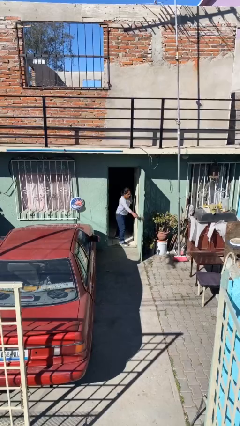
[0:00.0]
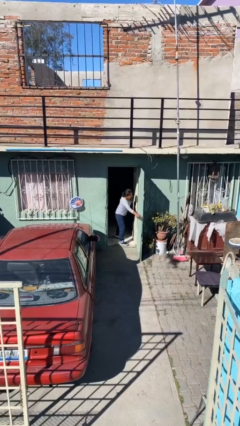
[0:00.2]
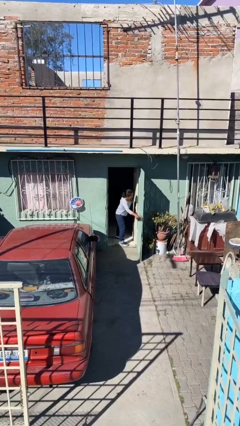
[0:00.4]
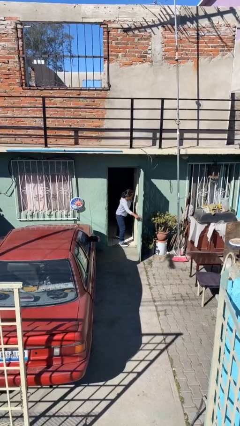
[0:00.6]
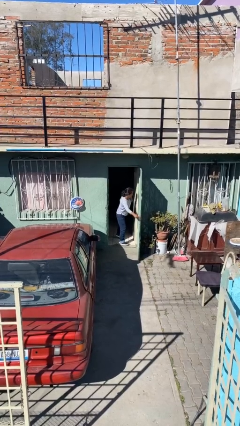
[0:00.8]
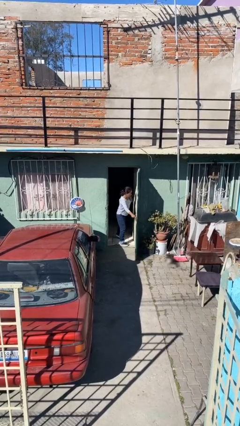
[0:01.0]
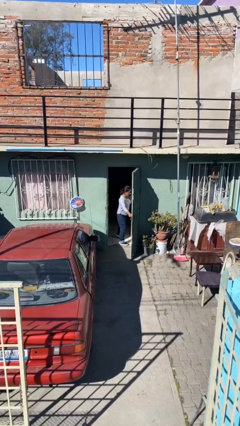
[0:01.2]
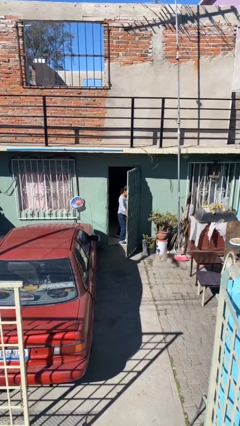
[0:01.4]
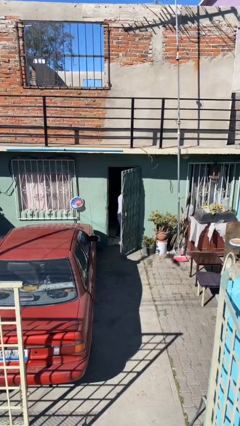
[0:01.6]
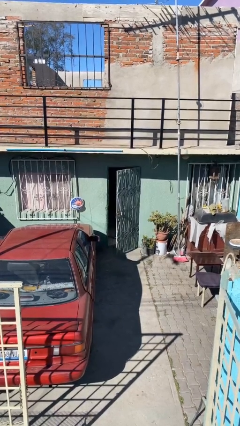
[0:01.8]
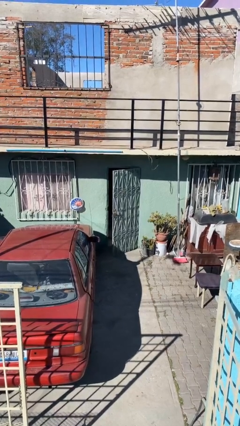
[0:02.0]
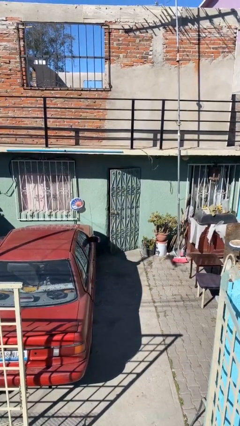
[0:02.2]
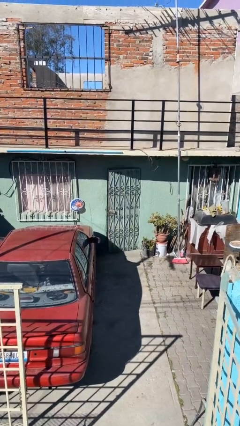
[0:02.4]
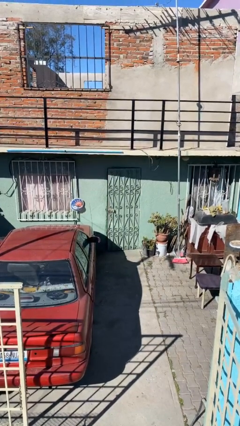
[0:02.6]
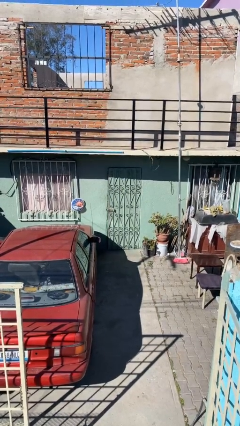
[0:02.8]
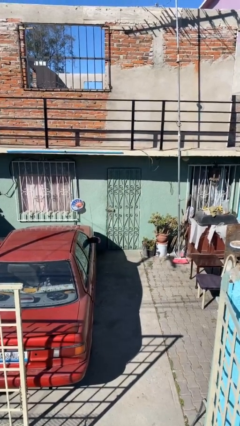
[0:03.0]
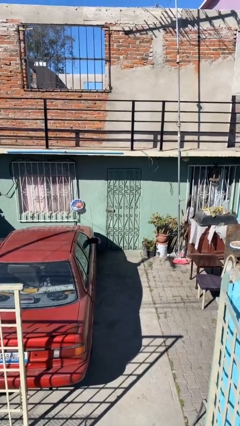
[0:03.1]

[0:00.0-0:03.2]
person closes facility door

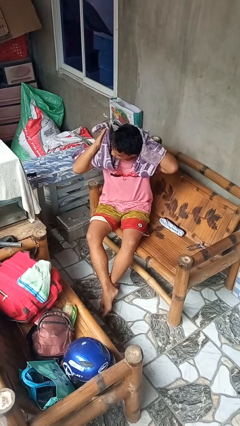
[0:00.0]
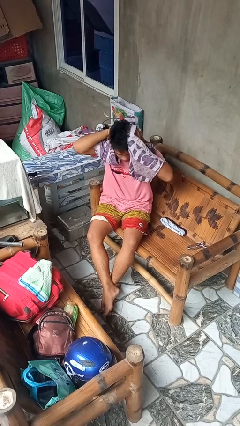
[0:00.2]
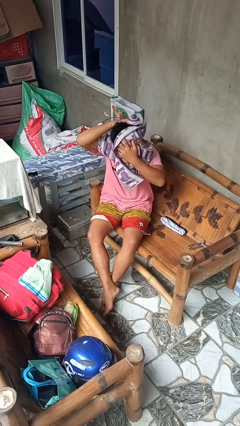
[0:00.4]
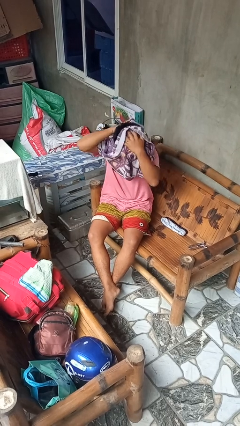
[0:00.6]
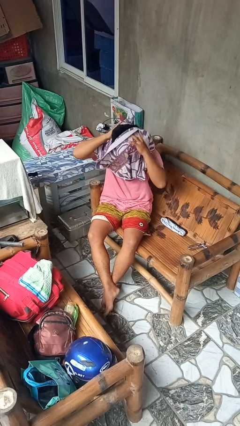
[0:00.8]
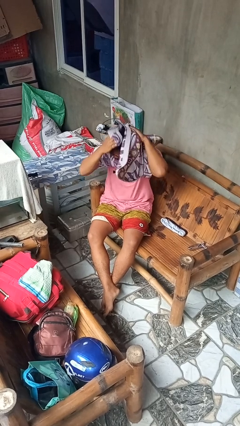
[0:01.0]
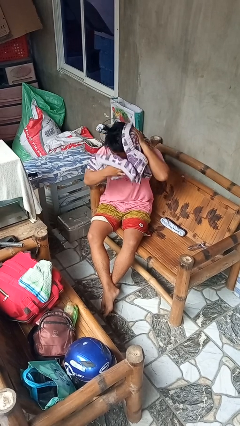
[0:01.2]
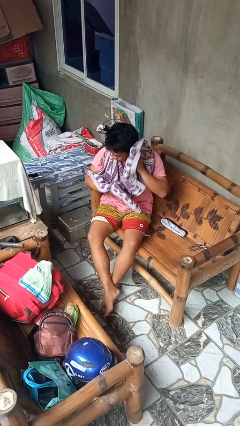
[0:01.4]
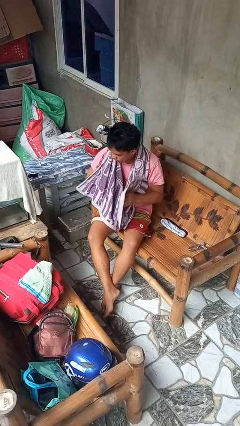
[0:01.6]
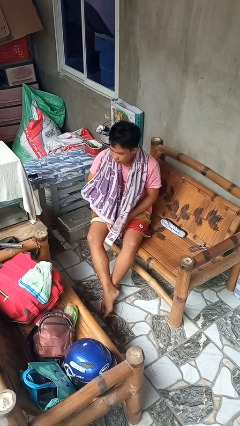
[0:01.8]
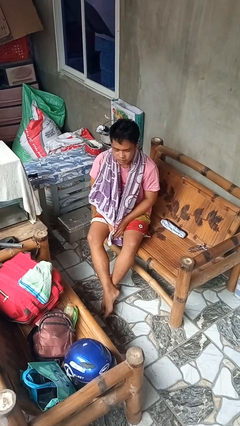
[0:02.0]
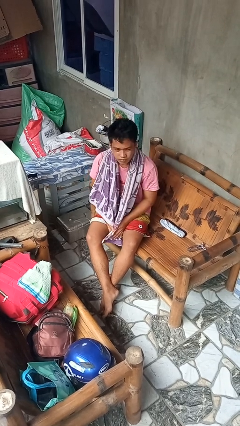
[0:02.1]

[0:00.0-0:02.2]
person dries hair with towel

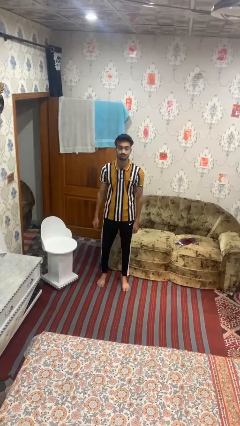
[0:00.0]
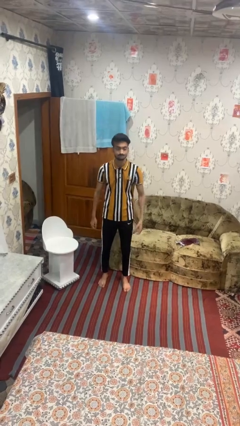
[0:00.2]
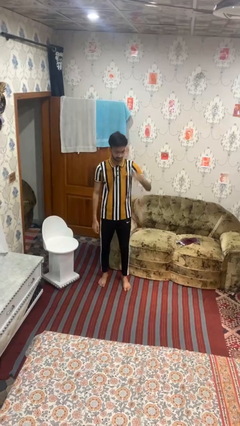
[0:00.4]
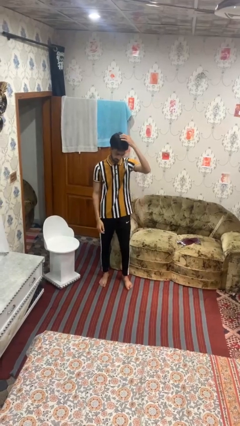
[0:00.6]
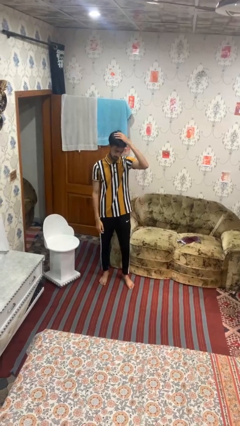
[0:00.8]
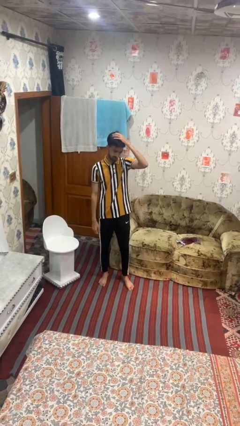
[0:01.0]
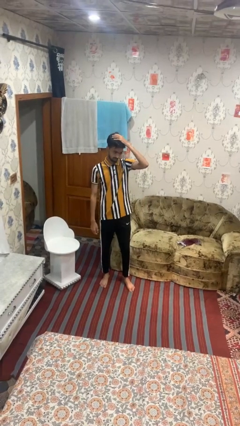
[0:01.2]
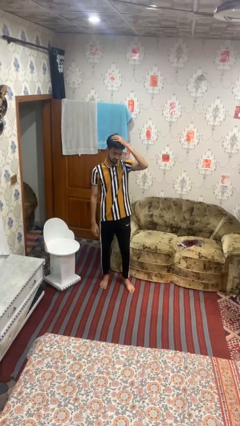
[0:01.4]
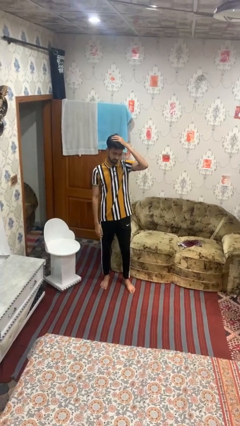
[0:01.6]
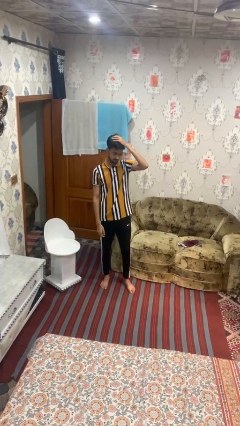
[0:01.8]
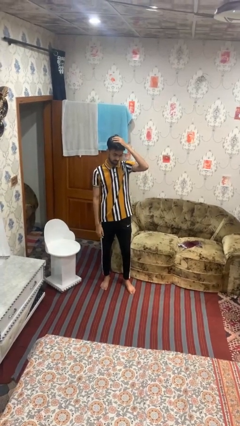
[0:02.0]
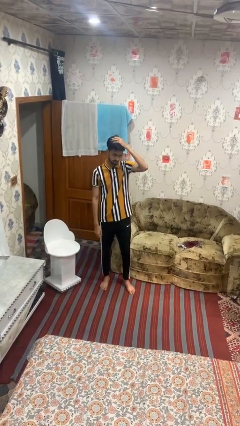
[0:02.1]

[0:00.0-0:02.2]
person pats head

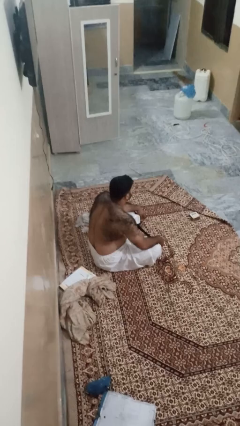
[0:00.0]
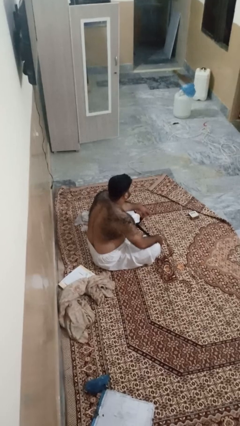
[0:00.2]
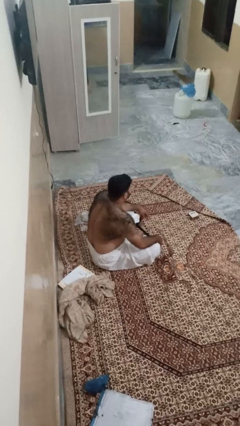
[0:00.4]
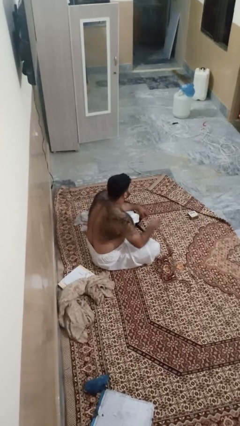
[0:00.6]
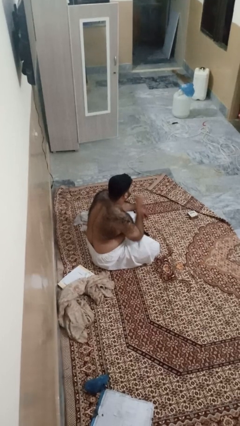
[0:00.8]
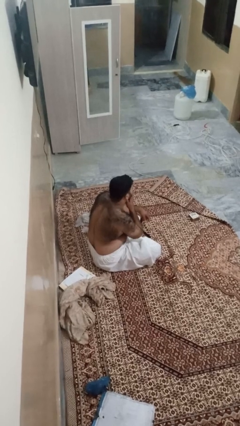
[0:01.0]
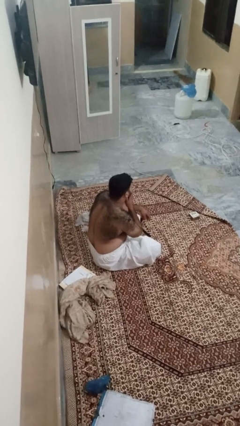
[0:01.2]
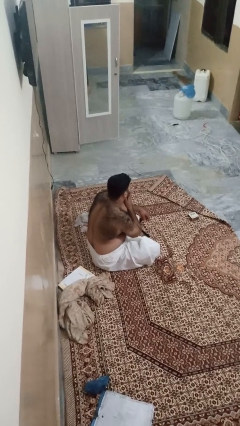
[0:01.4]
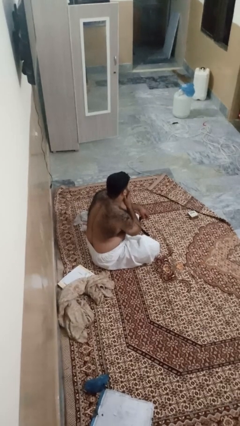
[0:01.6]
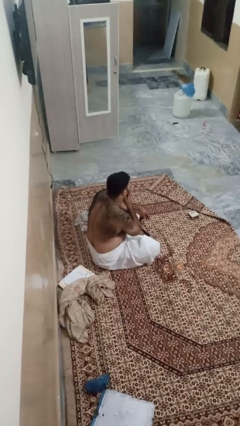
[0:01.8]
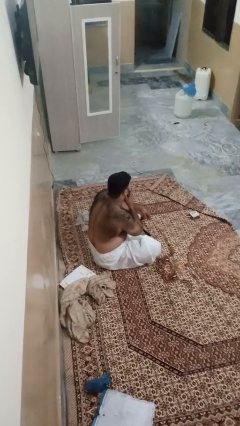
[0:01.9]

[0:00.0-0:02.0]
person strokes chin

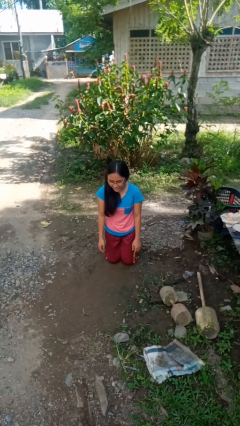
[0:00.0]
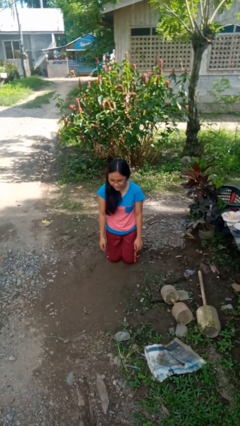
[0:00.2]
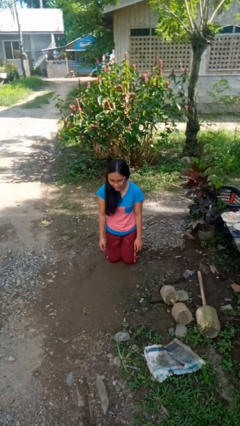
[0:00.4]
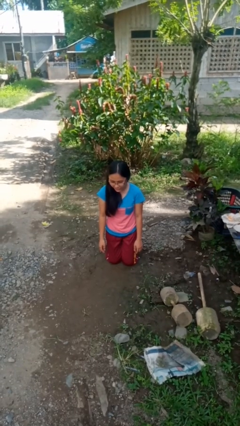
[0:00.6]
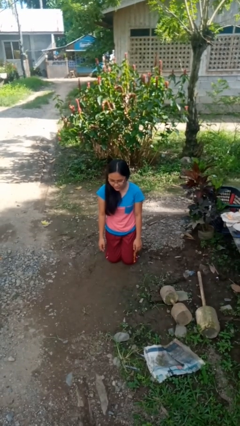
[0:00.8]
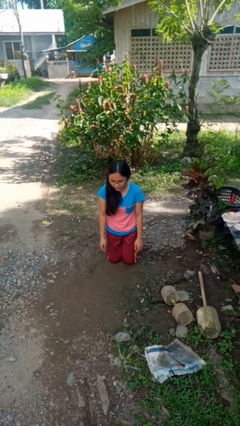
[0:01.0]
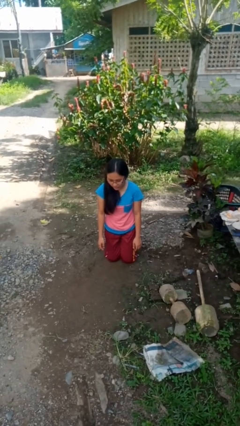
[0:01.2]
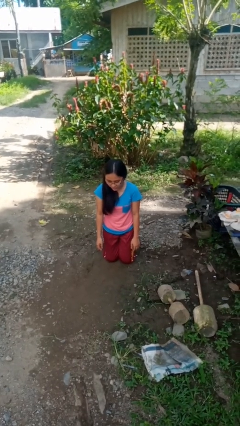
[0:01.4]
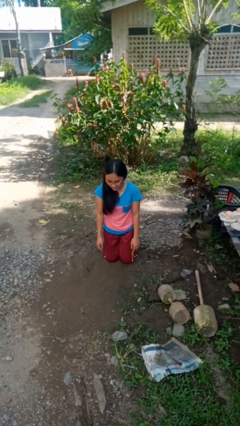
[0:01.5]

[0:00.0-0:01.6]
person kneels

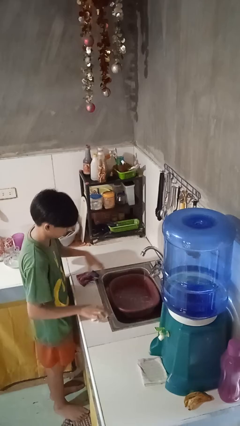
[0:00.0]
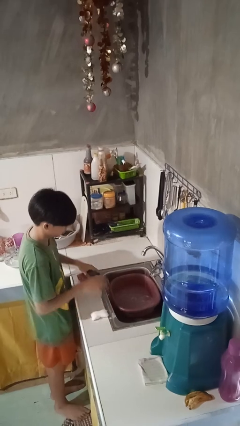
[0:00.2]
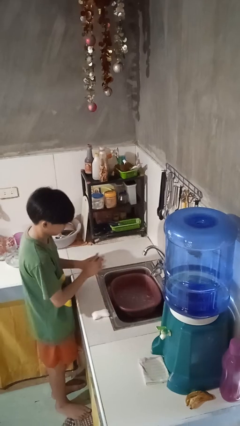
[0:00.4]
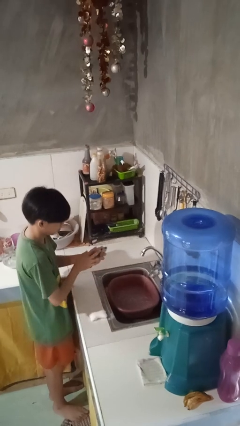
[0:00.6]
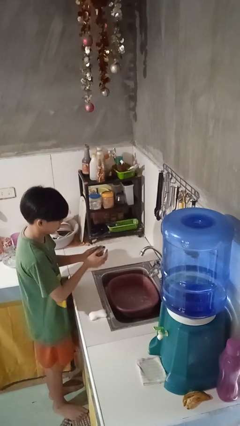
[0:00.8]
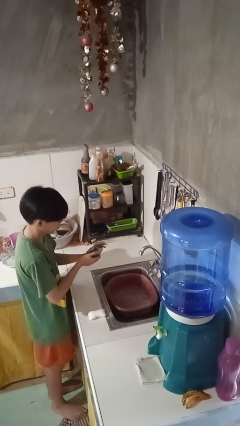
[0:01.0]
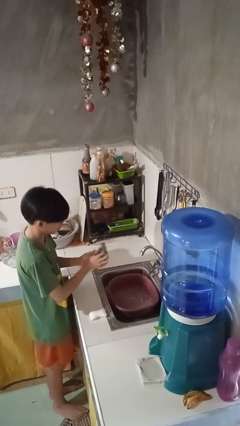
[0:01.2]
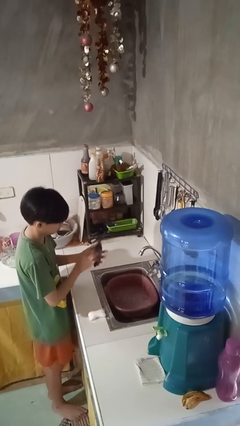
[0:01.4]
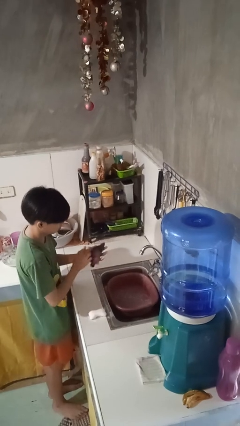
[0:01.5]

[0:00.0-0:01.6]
person dries hands with towel

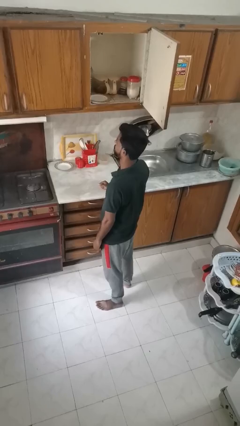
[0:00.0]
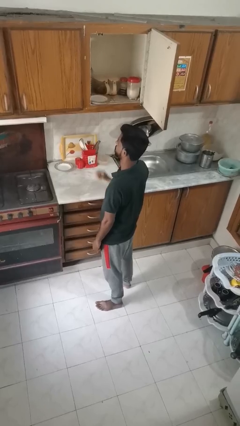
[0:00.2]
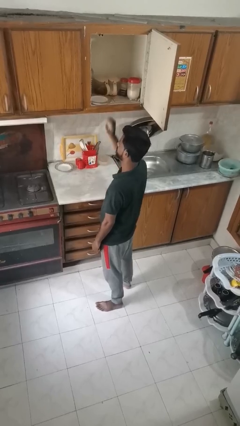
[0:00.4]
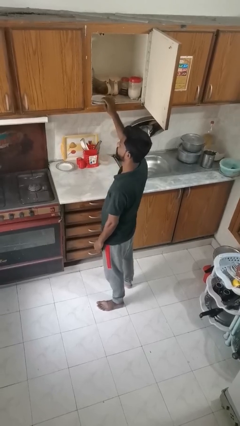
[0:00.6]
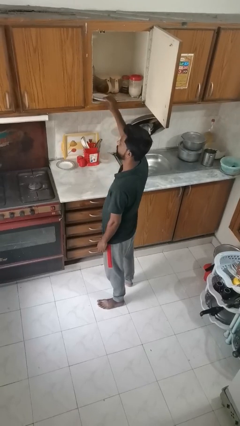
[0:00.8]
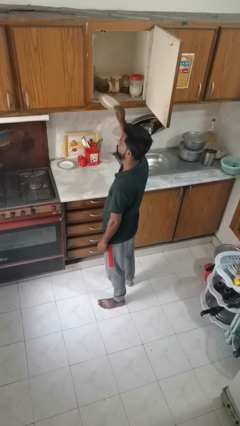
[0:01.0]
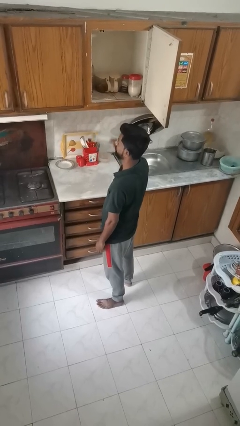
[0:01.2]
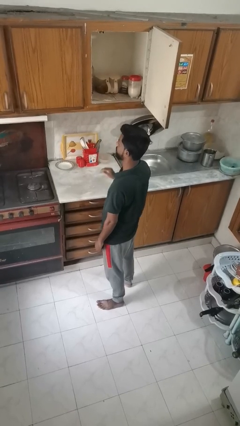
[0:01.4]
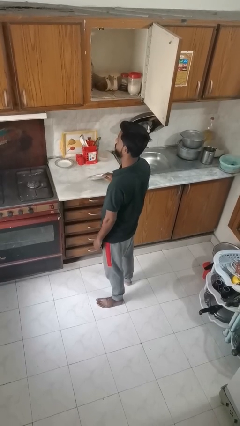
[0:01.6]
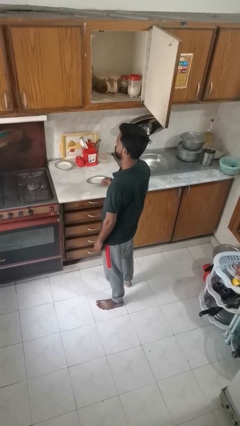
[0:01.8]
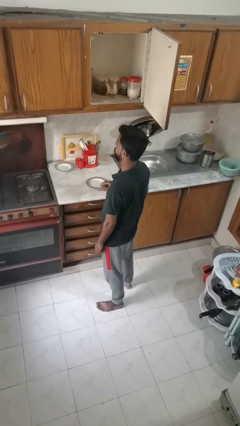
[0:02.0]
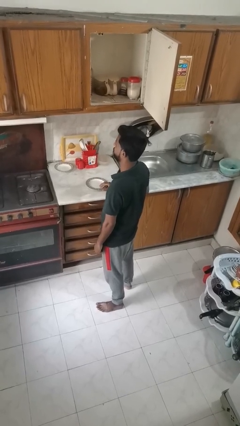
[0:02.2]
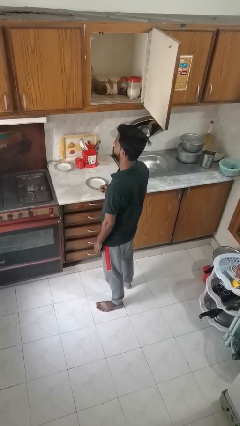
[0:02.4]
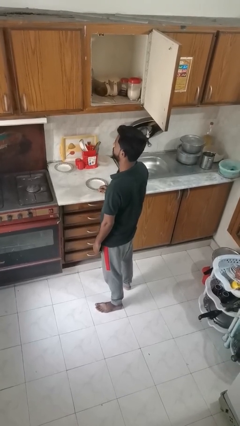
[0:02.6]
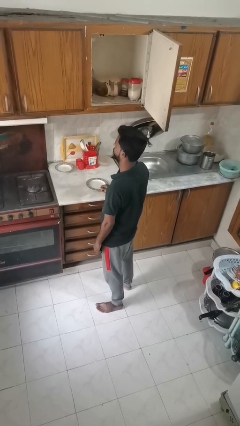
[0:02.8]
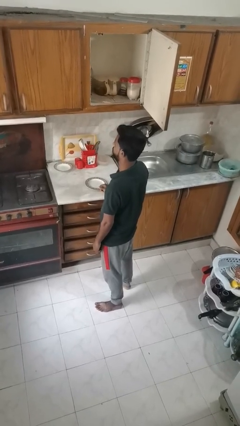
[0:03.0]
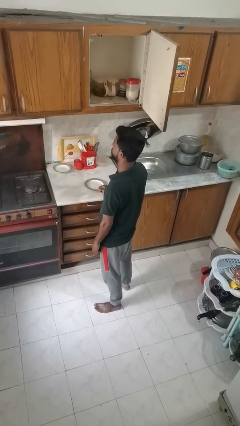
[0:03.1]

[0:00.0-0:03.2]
person takes object from cabinet

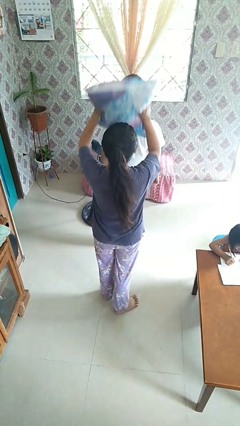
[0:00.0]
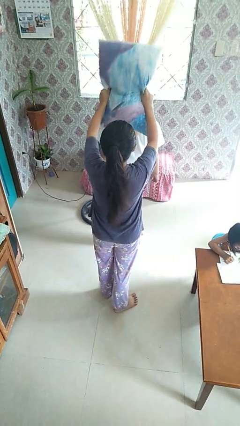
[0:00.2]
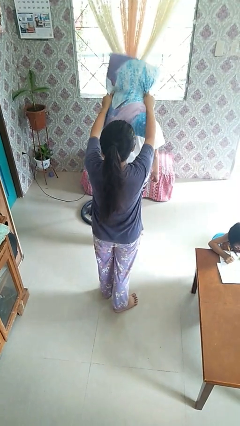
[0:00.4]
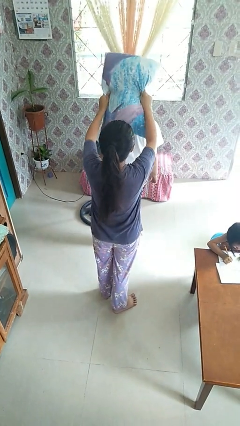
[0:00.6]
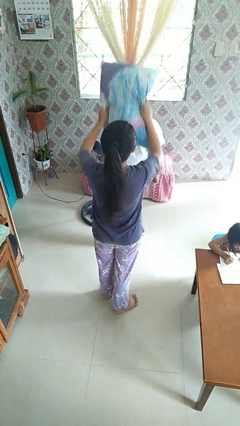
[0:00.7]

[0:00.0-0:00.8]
person hits person with pillow

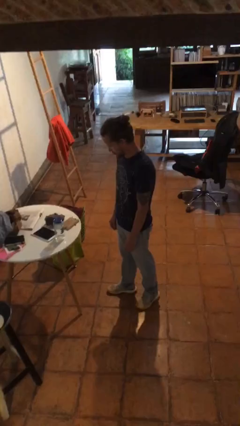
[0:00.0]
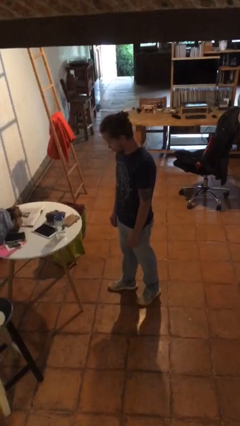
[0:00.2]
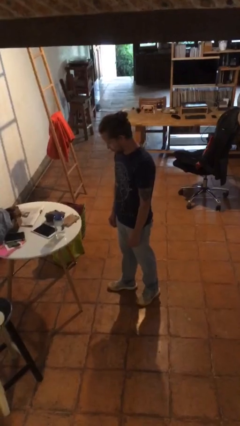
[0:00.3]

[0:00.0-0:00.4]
person waves hand over object
